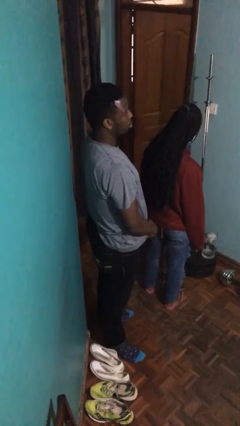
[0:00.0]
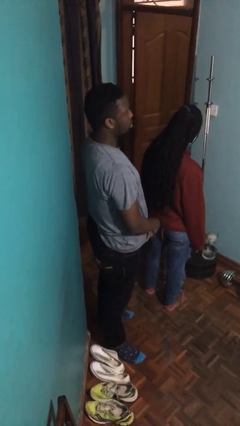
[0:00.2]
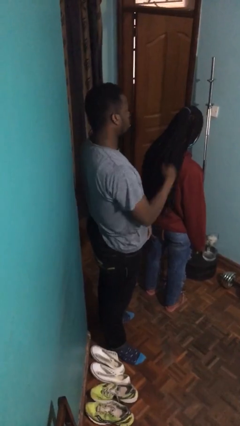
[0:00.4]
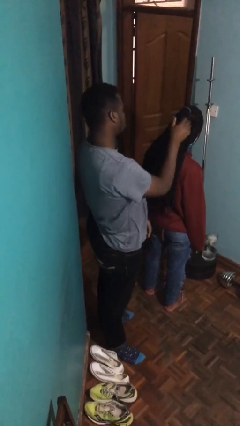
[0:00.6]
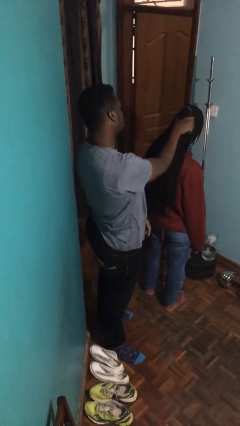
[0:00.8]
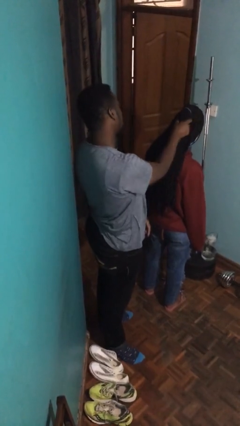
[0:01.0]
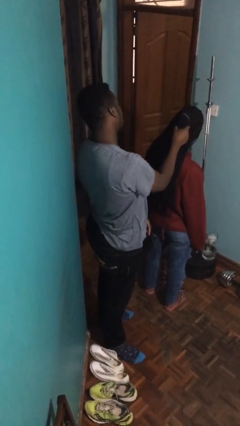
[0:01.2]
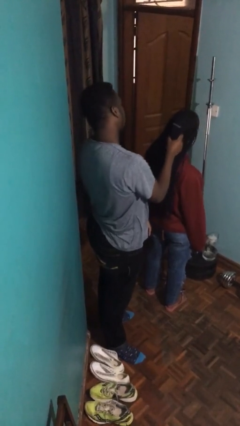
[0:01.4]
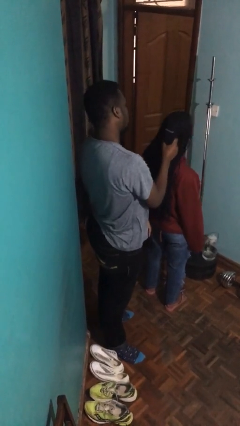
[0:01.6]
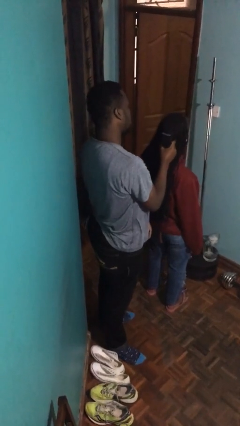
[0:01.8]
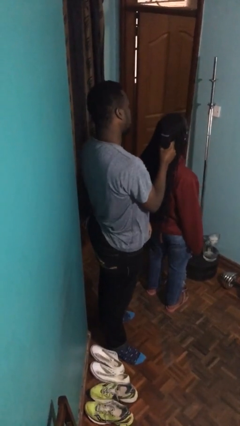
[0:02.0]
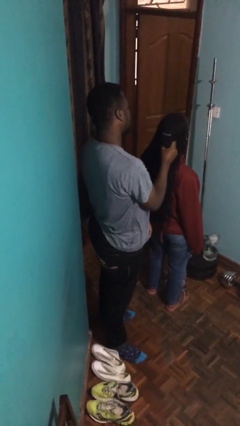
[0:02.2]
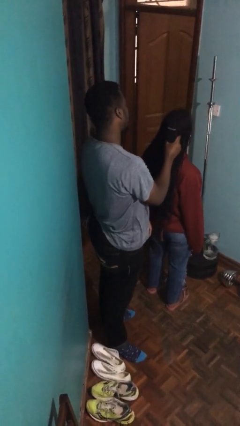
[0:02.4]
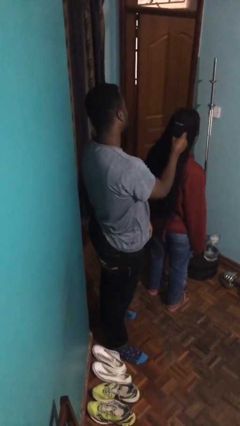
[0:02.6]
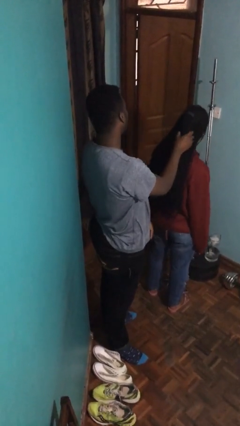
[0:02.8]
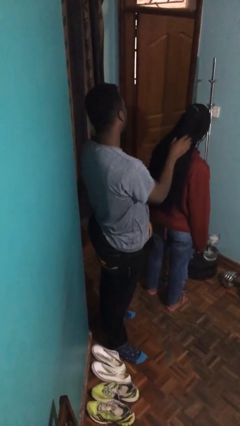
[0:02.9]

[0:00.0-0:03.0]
person grabs person by hair

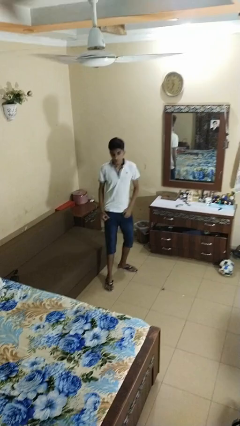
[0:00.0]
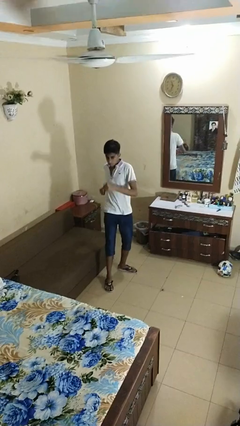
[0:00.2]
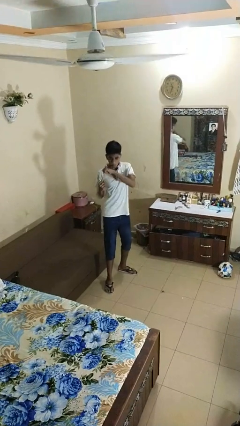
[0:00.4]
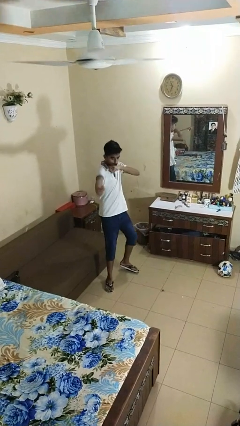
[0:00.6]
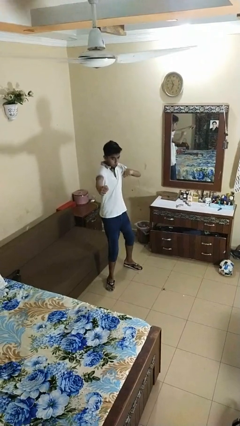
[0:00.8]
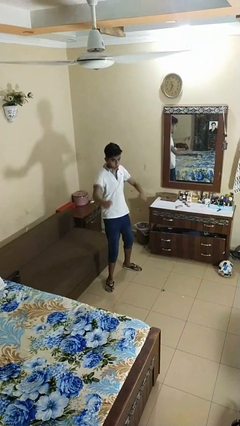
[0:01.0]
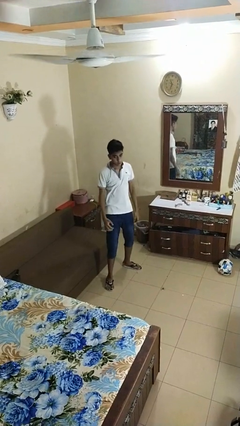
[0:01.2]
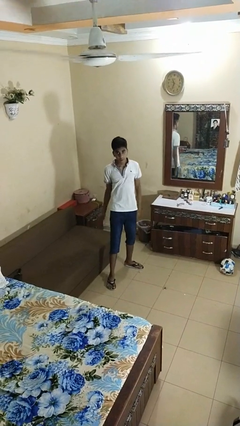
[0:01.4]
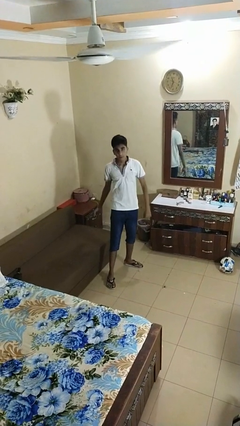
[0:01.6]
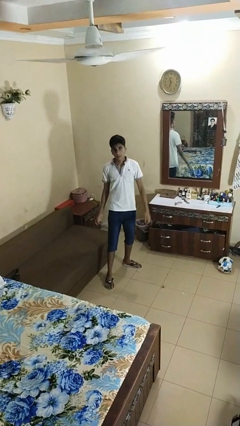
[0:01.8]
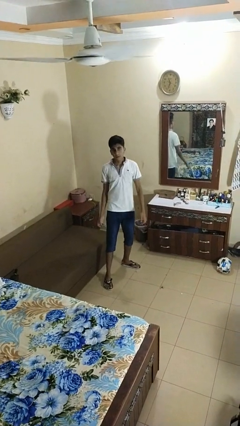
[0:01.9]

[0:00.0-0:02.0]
person karate chop

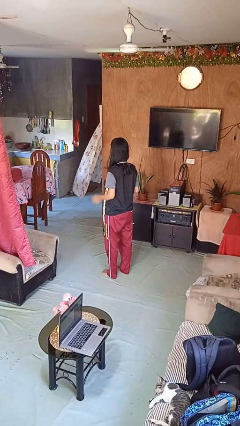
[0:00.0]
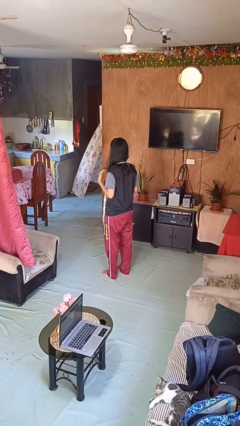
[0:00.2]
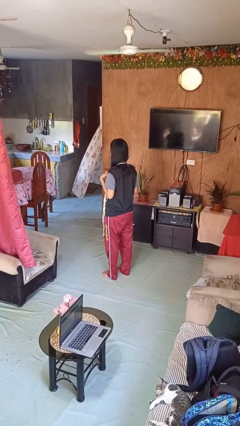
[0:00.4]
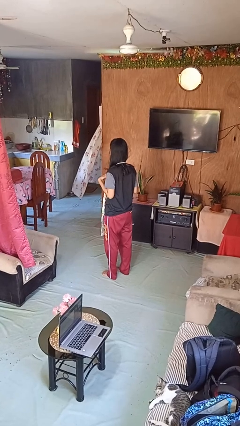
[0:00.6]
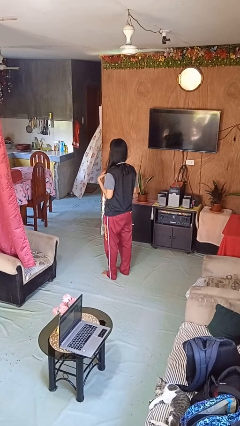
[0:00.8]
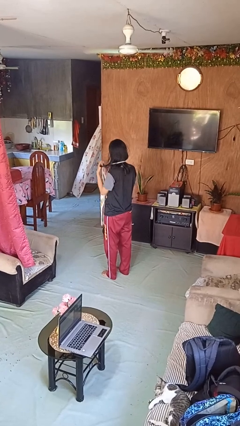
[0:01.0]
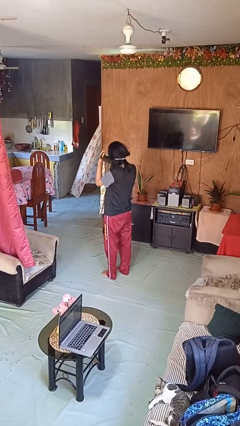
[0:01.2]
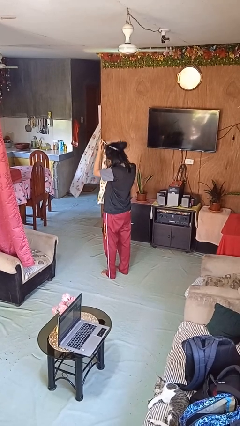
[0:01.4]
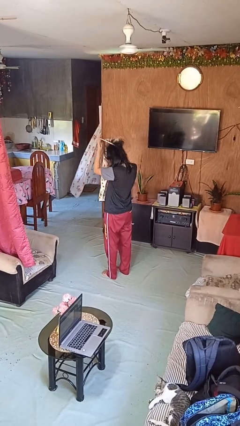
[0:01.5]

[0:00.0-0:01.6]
person takes off apron

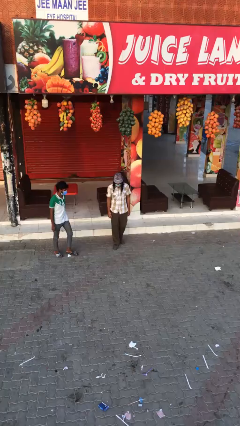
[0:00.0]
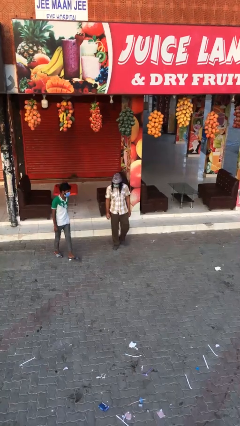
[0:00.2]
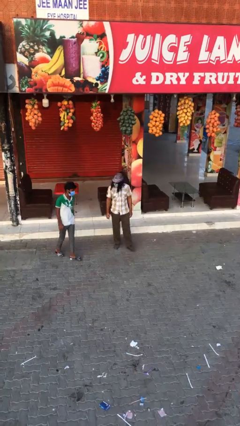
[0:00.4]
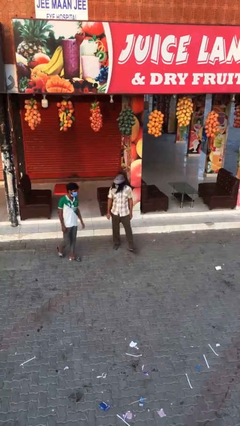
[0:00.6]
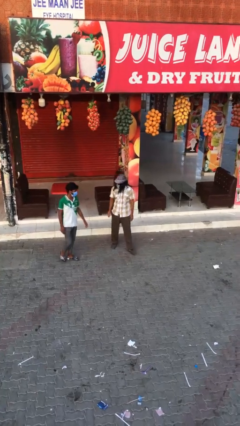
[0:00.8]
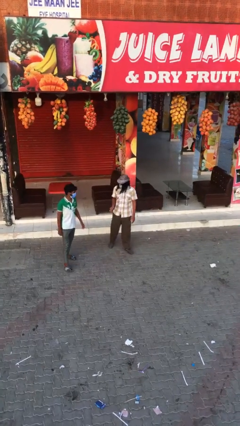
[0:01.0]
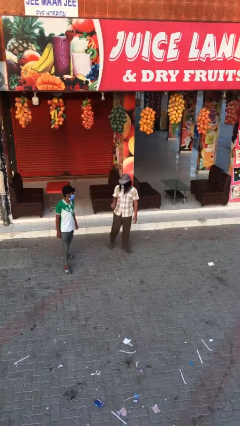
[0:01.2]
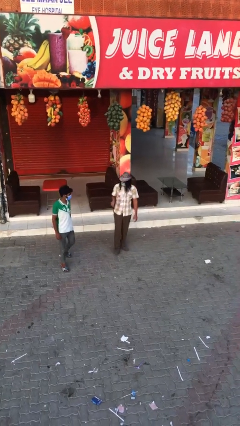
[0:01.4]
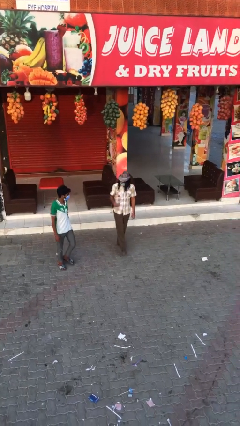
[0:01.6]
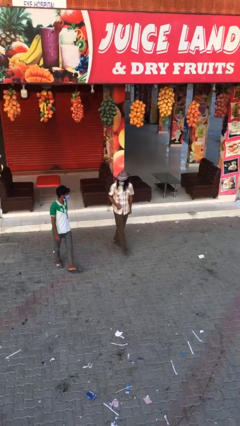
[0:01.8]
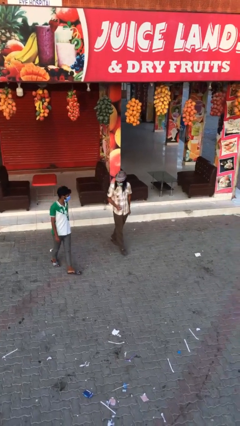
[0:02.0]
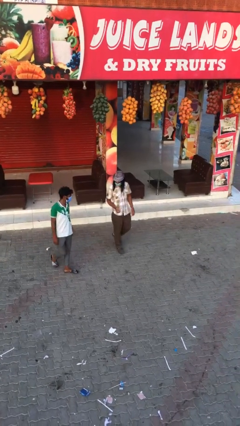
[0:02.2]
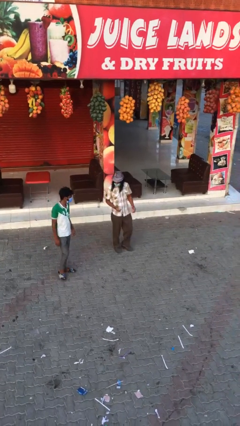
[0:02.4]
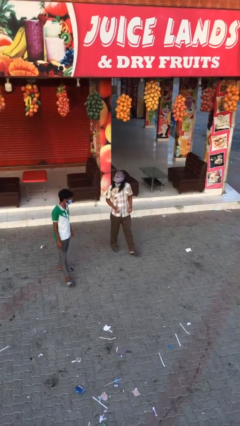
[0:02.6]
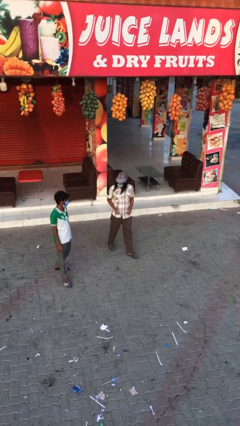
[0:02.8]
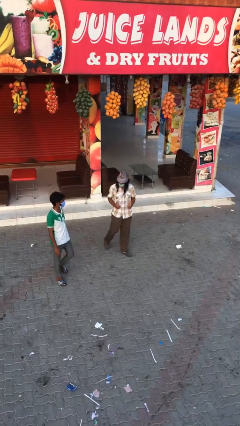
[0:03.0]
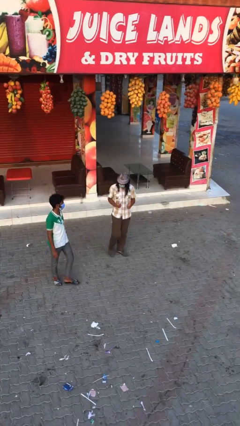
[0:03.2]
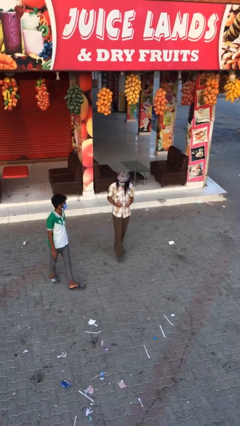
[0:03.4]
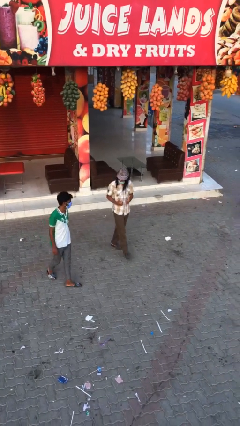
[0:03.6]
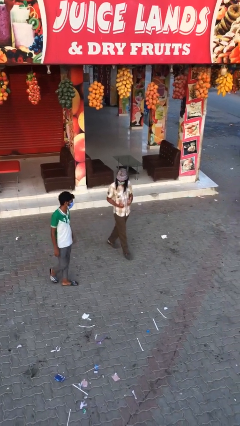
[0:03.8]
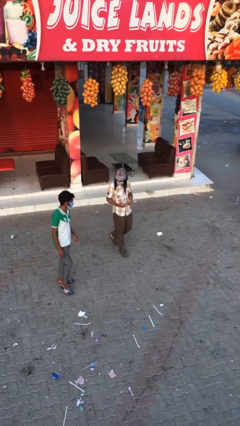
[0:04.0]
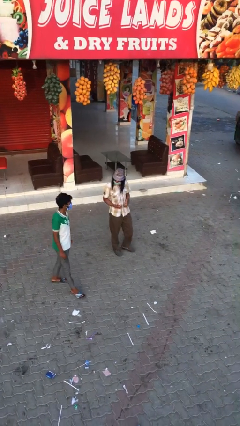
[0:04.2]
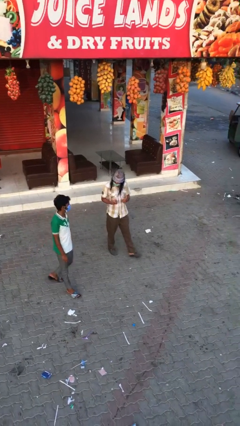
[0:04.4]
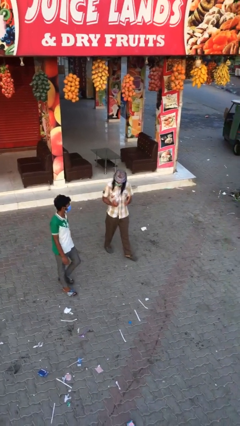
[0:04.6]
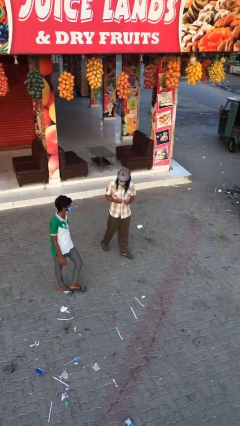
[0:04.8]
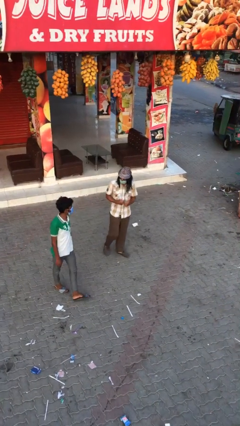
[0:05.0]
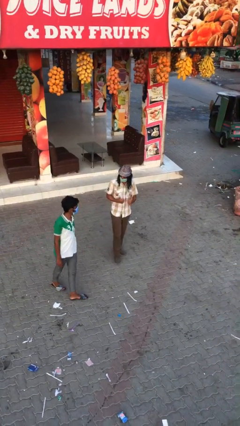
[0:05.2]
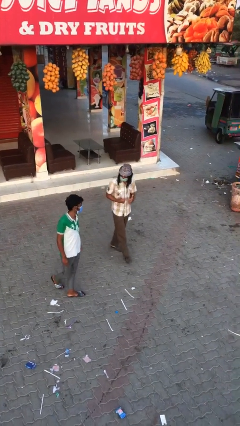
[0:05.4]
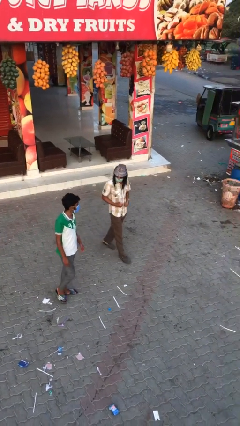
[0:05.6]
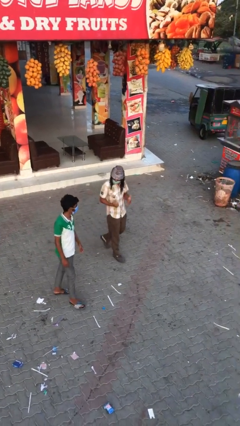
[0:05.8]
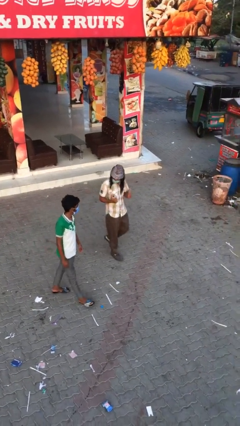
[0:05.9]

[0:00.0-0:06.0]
person talks to person

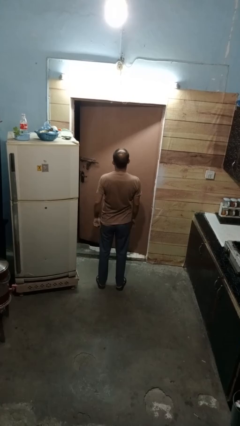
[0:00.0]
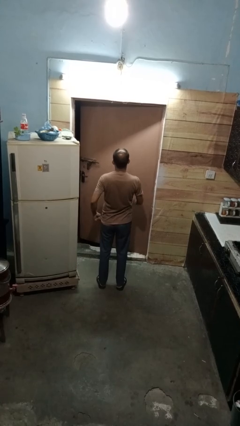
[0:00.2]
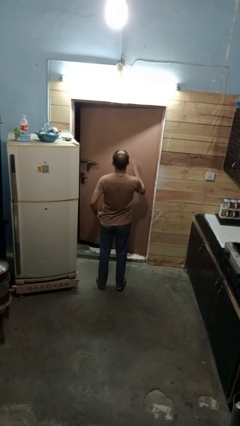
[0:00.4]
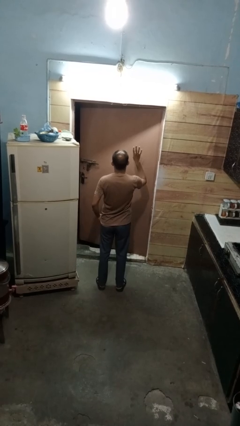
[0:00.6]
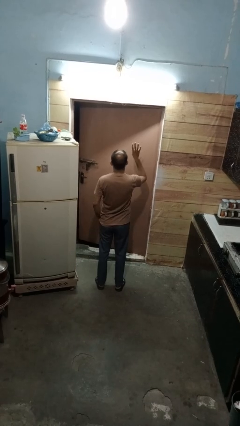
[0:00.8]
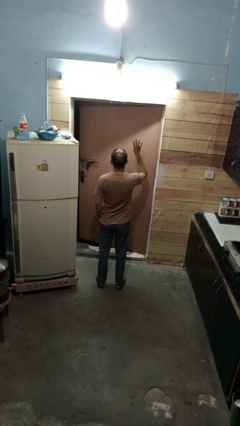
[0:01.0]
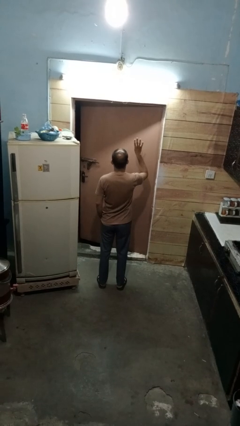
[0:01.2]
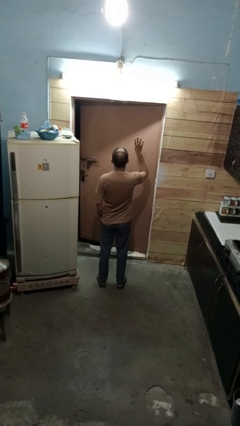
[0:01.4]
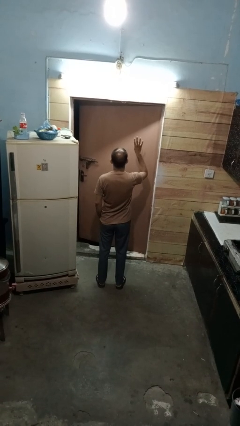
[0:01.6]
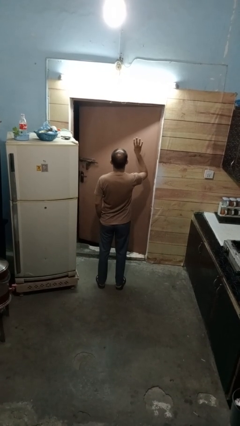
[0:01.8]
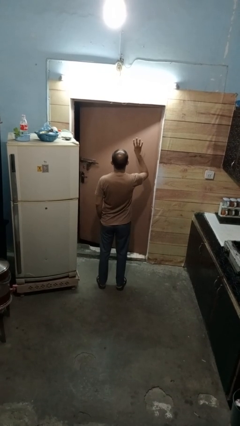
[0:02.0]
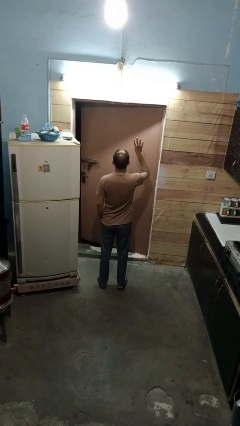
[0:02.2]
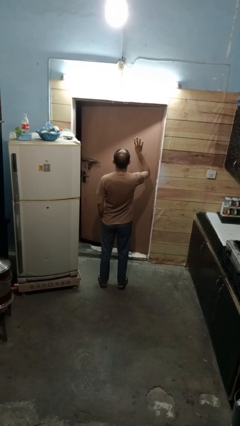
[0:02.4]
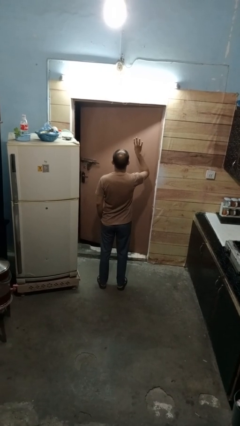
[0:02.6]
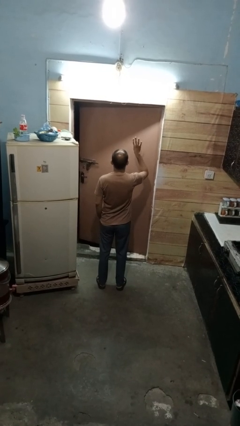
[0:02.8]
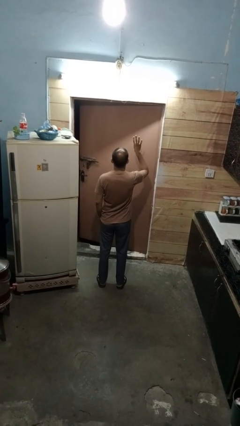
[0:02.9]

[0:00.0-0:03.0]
person gestures number four

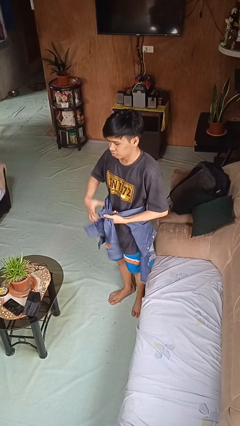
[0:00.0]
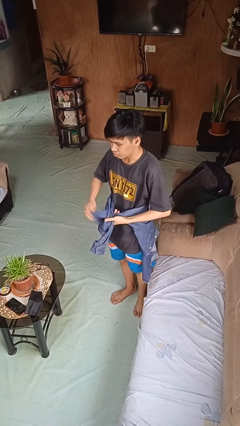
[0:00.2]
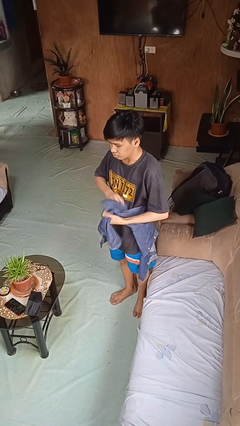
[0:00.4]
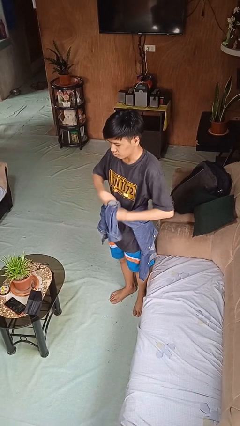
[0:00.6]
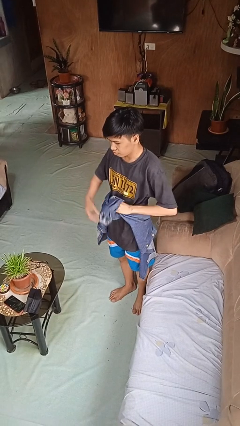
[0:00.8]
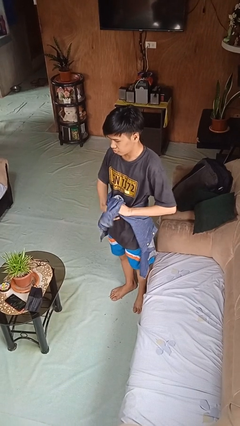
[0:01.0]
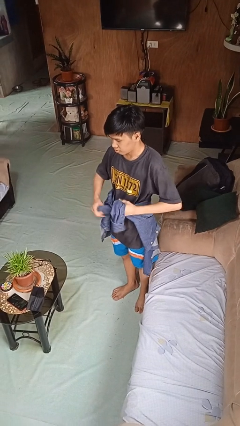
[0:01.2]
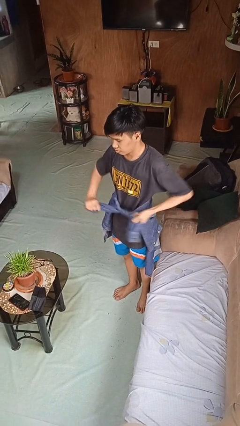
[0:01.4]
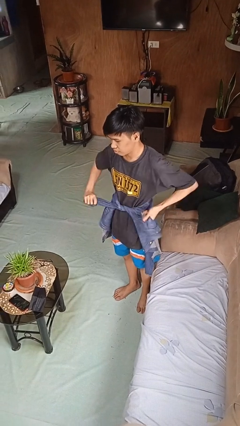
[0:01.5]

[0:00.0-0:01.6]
person ties jacket around waist

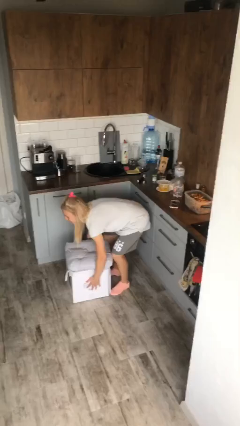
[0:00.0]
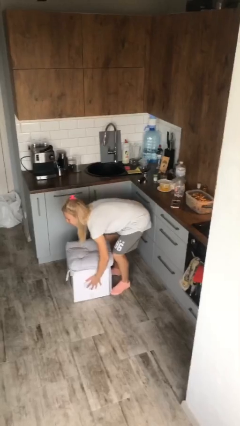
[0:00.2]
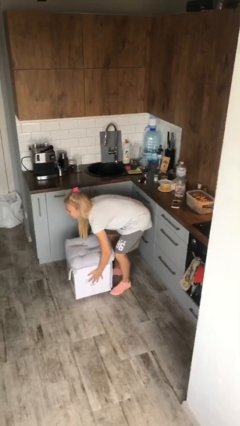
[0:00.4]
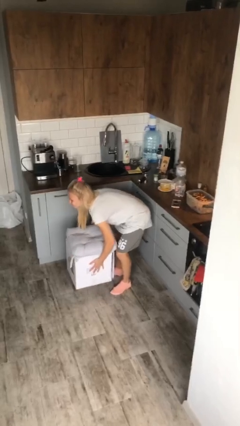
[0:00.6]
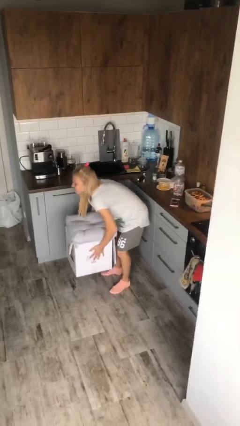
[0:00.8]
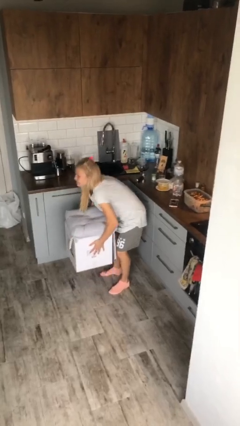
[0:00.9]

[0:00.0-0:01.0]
person picks up object from floor
